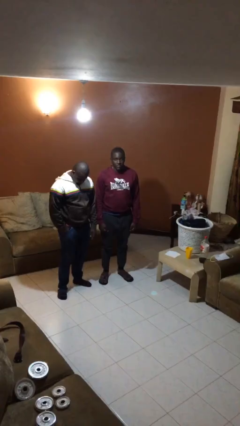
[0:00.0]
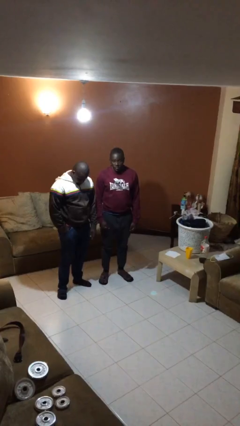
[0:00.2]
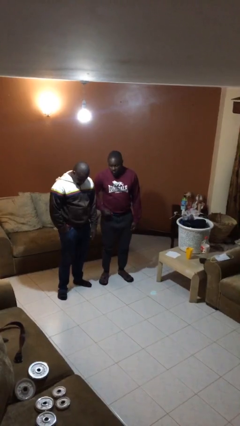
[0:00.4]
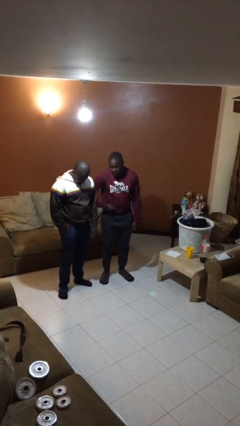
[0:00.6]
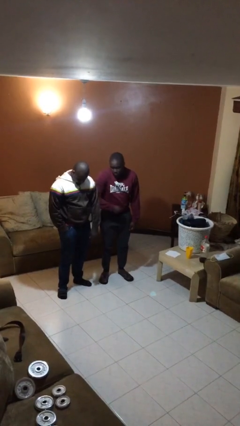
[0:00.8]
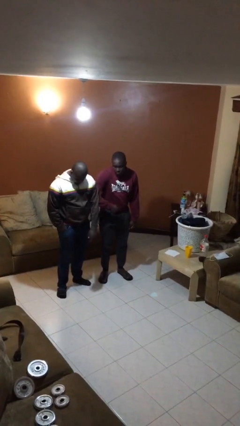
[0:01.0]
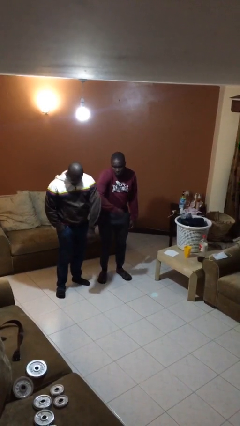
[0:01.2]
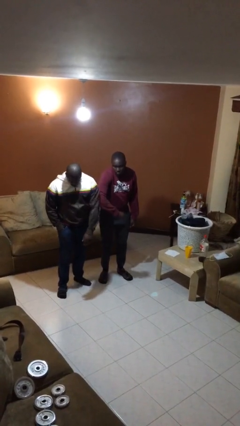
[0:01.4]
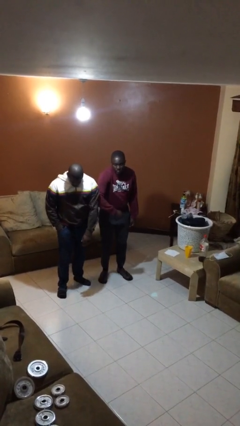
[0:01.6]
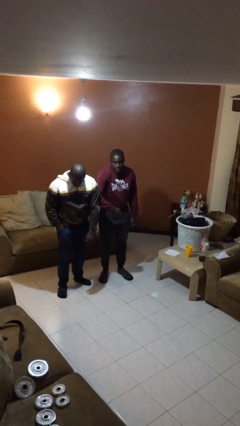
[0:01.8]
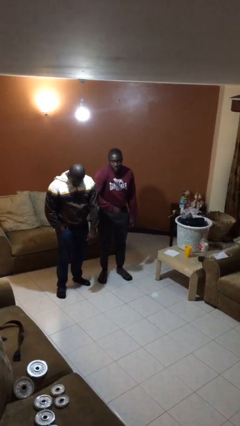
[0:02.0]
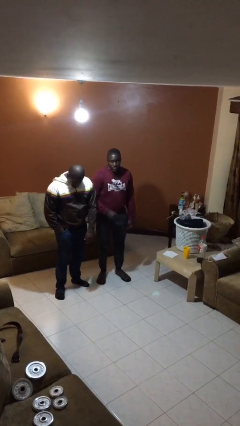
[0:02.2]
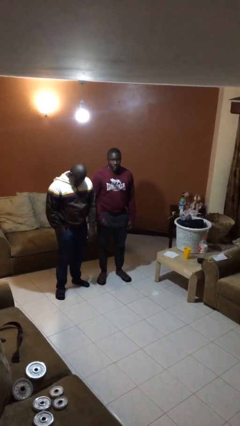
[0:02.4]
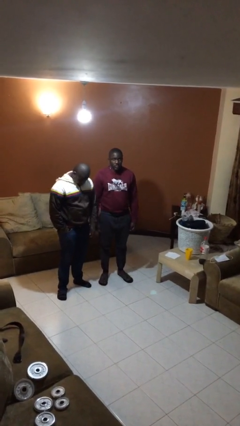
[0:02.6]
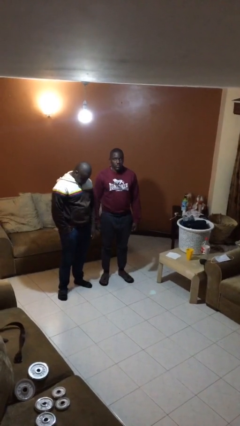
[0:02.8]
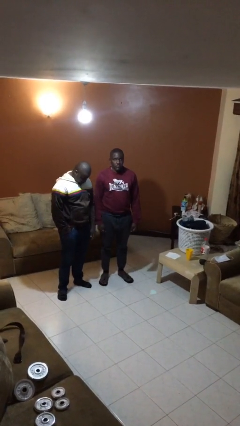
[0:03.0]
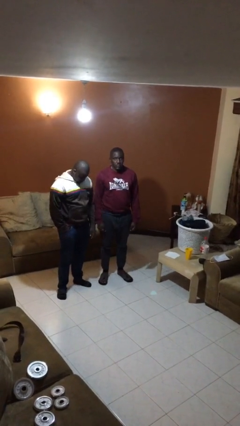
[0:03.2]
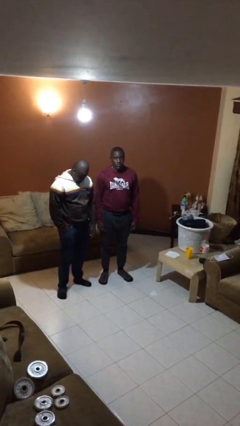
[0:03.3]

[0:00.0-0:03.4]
person nudges person with elbow

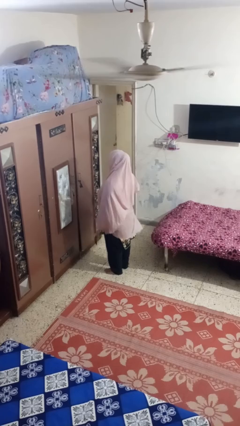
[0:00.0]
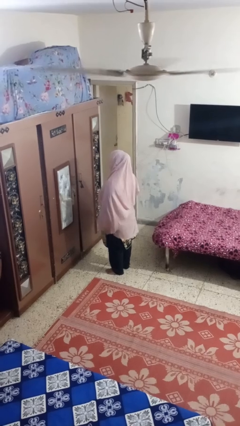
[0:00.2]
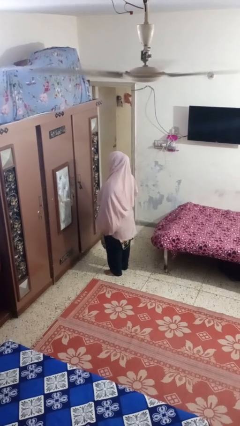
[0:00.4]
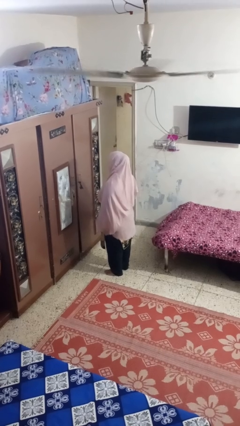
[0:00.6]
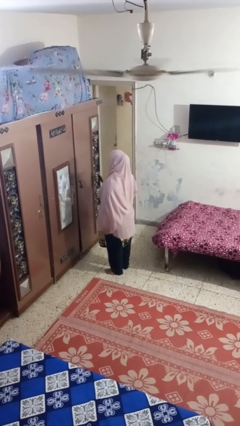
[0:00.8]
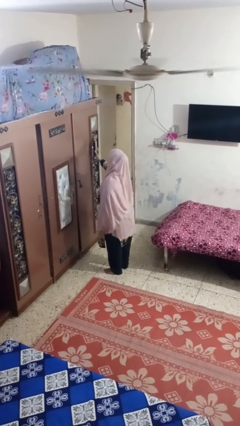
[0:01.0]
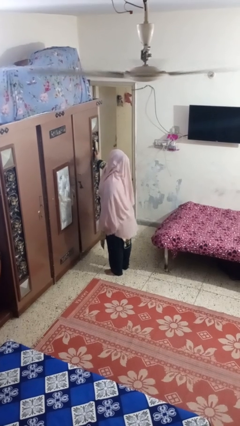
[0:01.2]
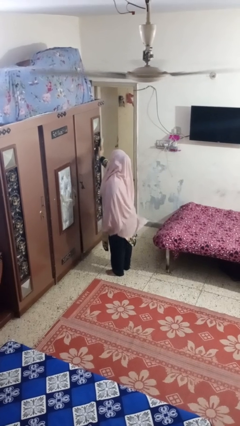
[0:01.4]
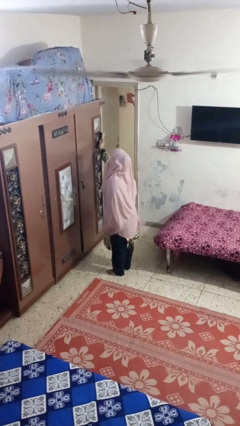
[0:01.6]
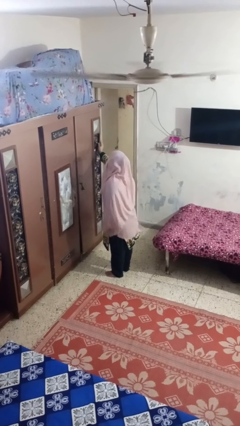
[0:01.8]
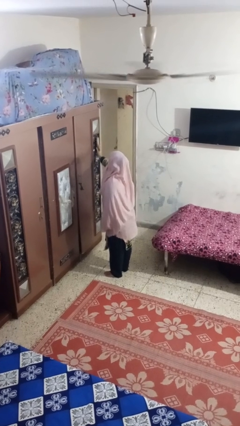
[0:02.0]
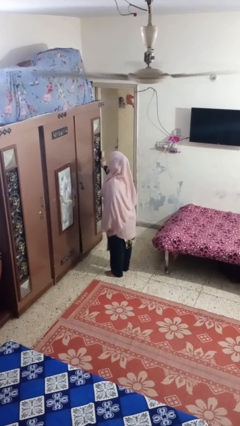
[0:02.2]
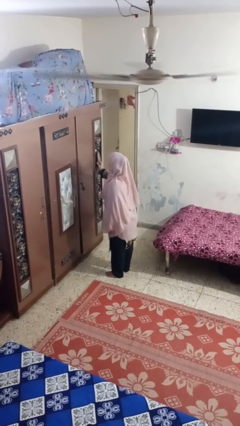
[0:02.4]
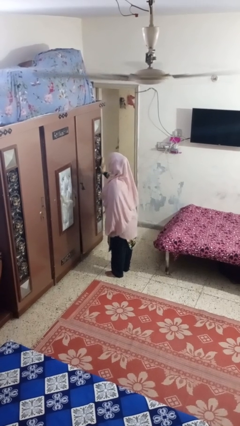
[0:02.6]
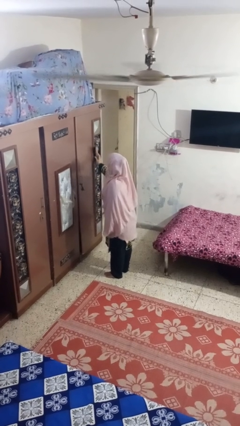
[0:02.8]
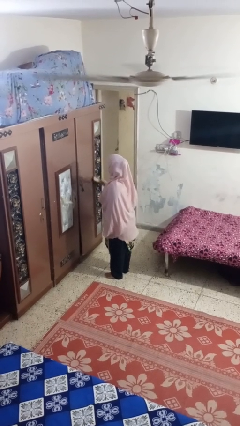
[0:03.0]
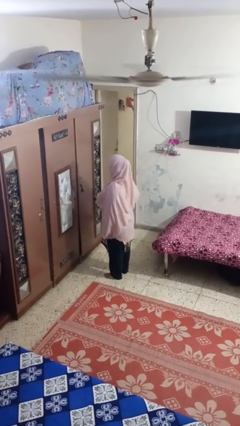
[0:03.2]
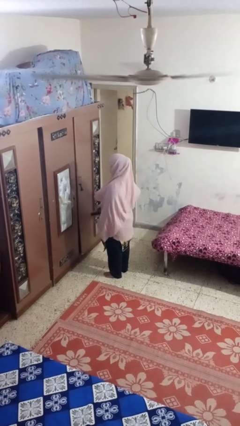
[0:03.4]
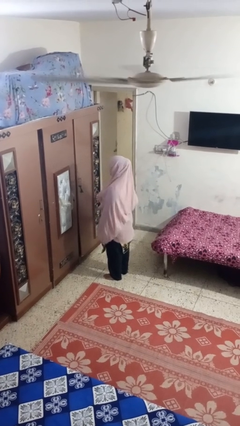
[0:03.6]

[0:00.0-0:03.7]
person dusts furniture

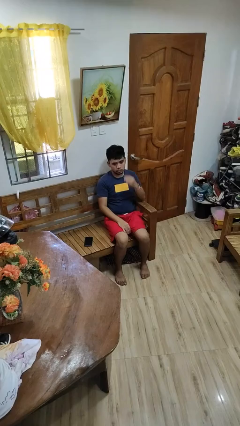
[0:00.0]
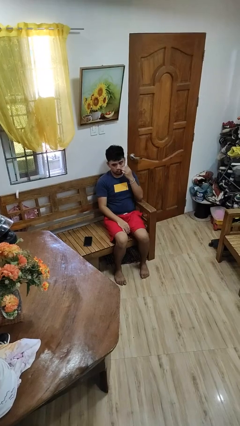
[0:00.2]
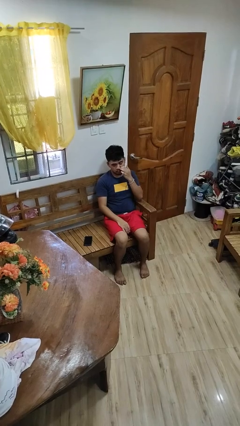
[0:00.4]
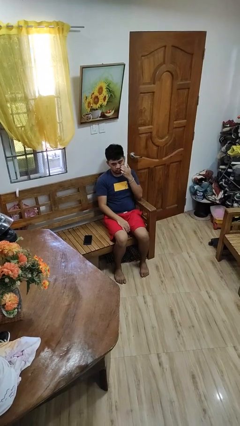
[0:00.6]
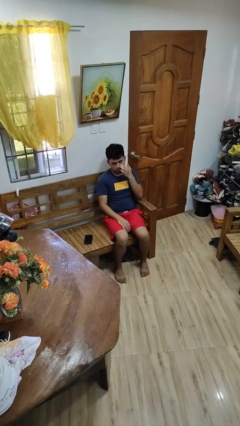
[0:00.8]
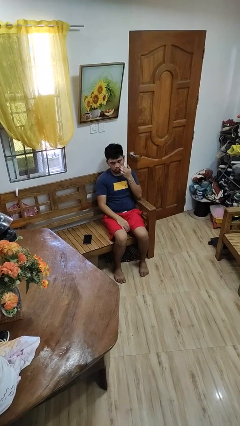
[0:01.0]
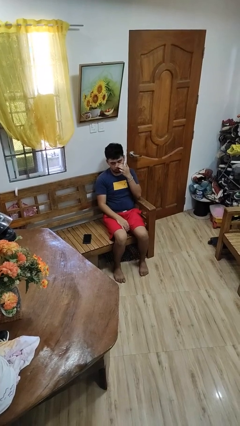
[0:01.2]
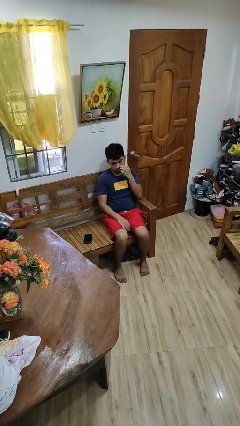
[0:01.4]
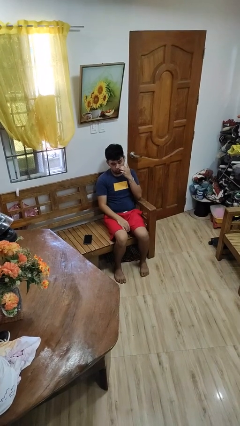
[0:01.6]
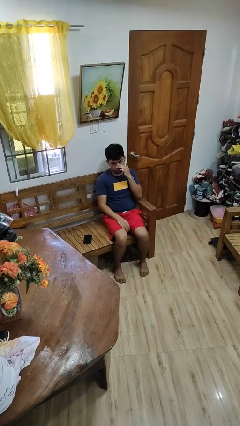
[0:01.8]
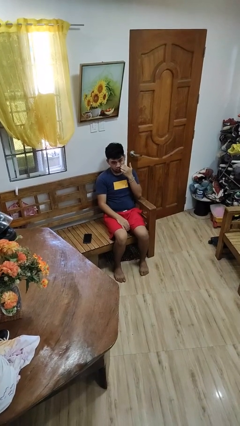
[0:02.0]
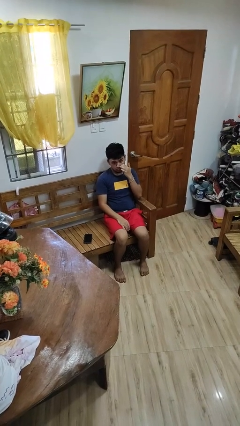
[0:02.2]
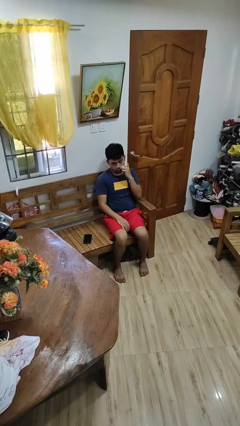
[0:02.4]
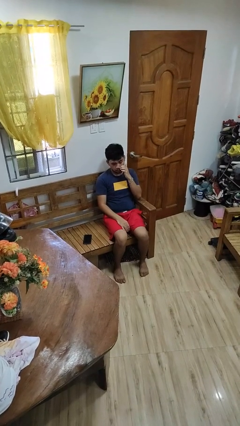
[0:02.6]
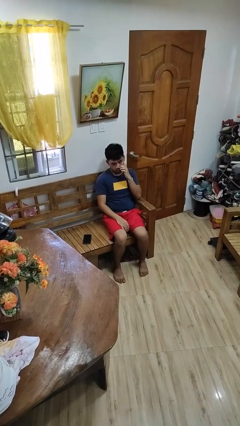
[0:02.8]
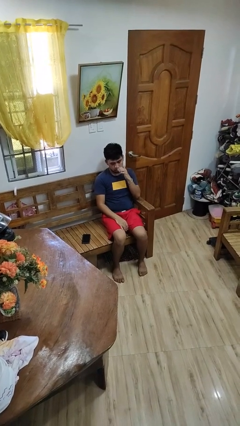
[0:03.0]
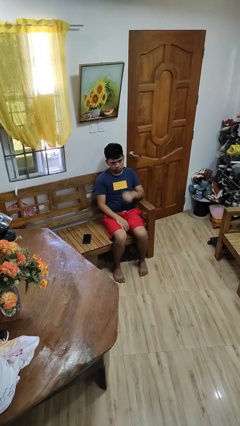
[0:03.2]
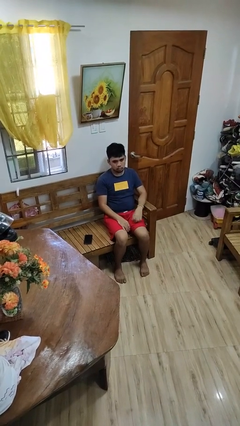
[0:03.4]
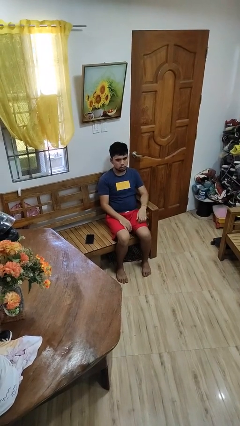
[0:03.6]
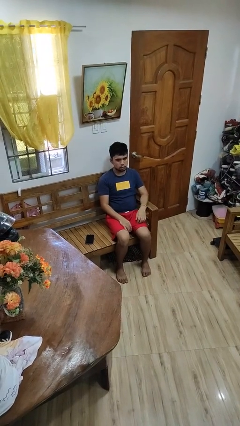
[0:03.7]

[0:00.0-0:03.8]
person scratches face

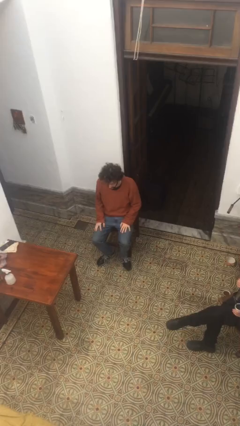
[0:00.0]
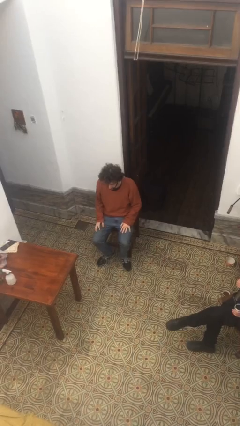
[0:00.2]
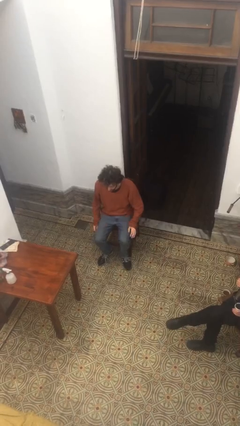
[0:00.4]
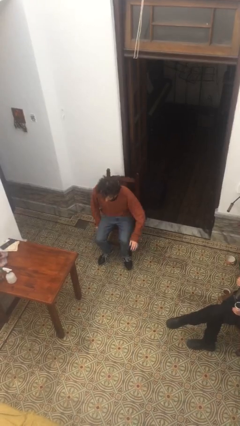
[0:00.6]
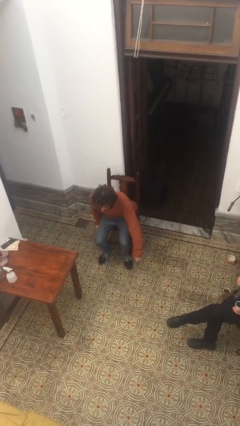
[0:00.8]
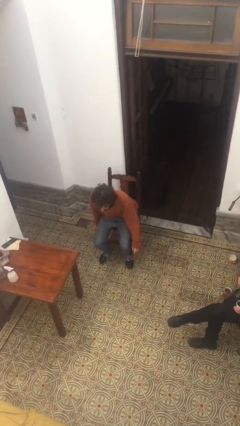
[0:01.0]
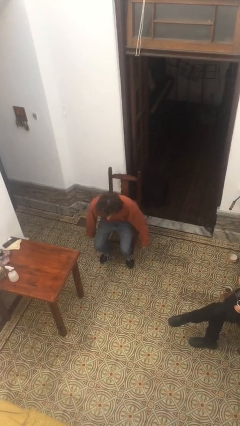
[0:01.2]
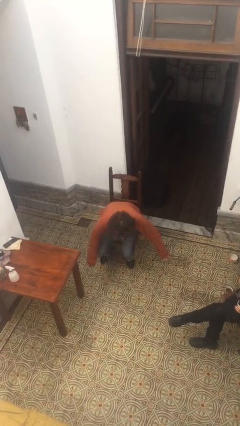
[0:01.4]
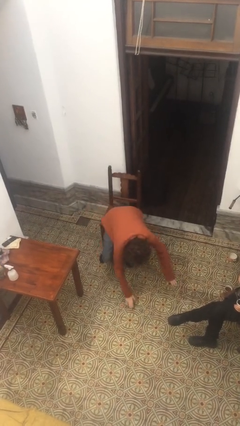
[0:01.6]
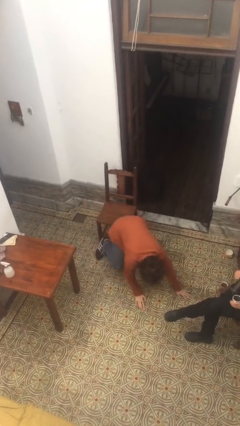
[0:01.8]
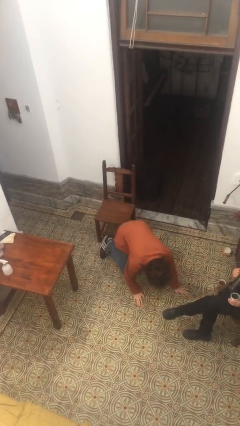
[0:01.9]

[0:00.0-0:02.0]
person falls from chair

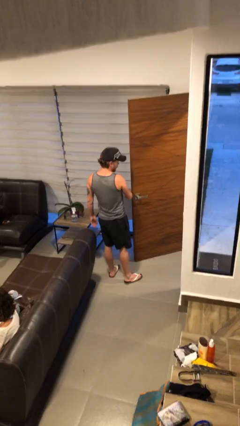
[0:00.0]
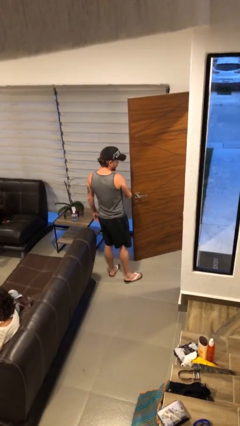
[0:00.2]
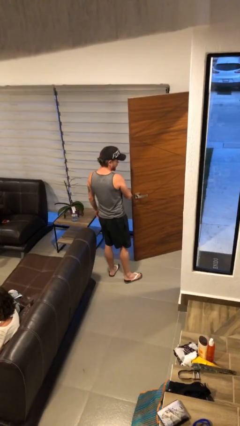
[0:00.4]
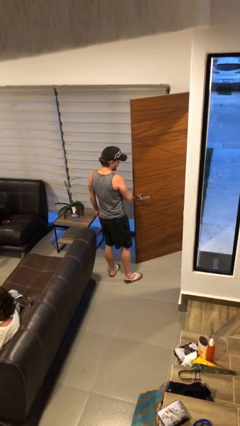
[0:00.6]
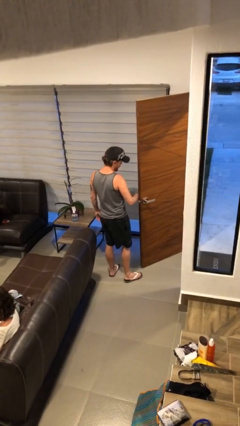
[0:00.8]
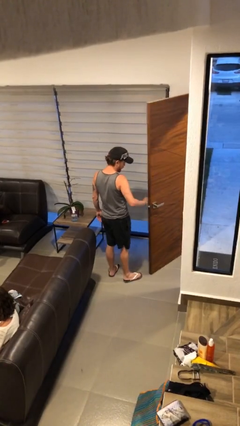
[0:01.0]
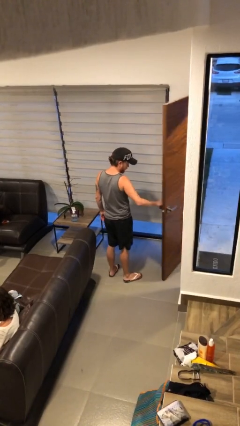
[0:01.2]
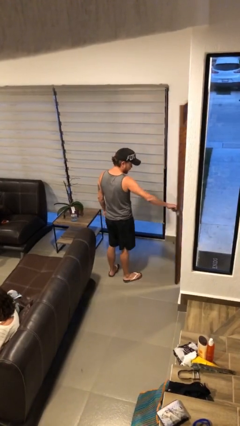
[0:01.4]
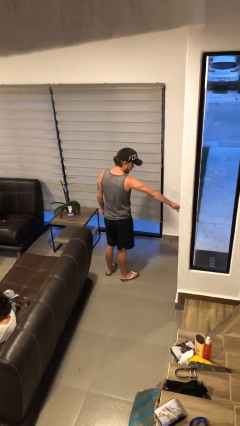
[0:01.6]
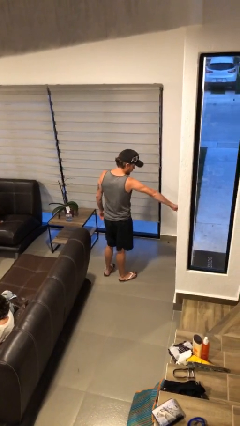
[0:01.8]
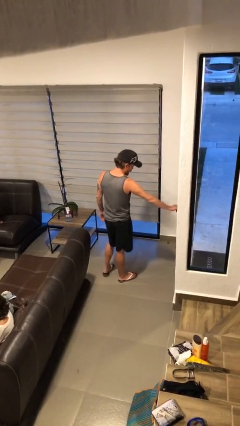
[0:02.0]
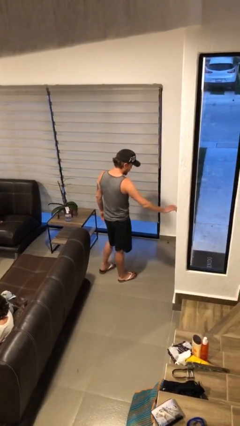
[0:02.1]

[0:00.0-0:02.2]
person closes facility door

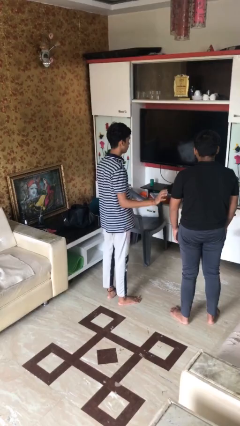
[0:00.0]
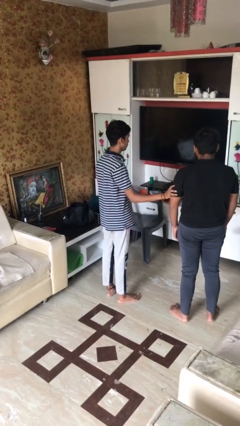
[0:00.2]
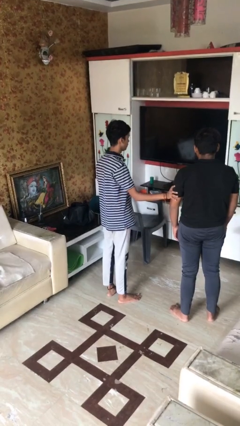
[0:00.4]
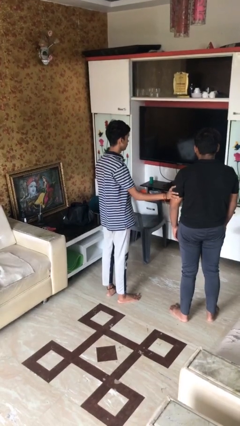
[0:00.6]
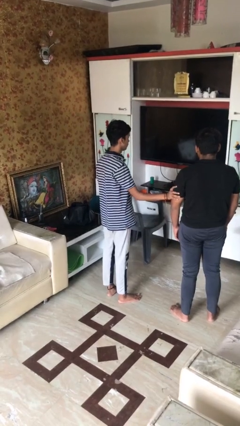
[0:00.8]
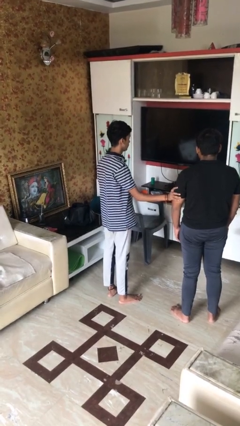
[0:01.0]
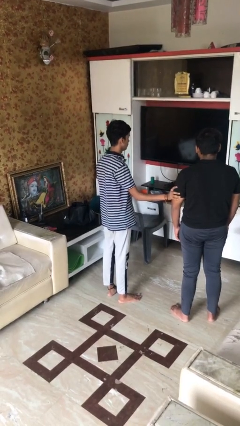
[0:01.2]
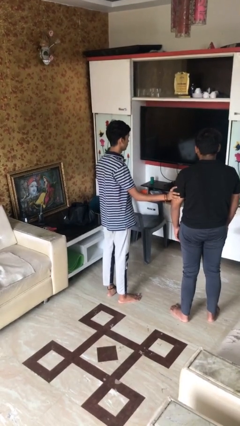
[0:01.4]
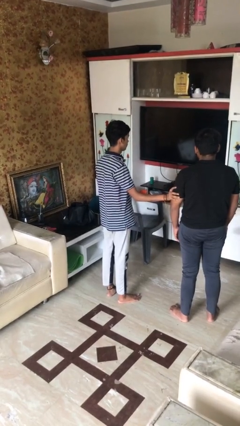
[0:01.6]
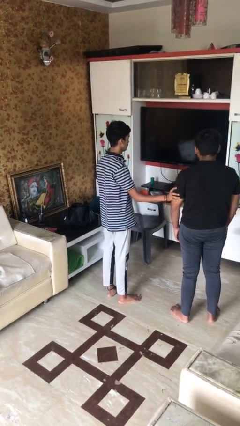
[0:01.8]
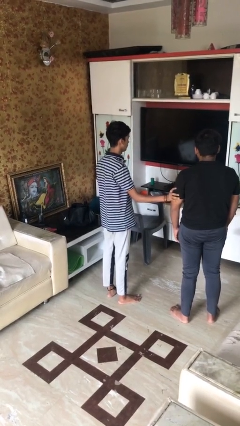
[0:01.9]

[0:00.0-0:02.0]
person grabs person by bicep

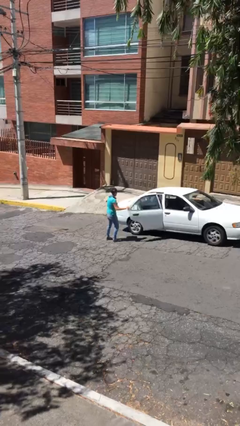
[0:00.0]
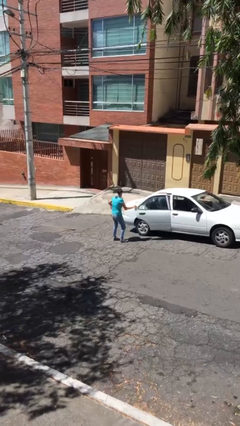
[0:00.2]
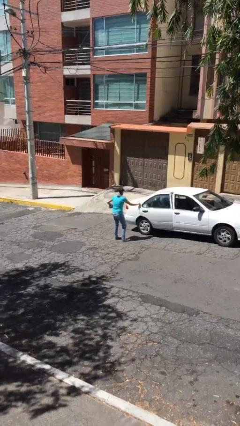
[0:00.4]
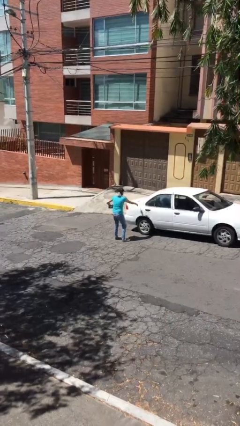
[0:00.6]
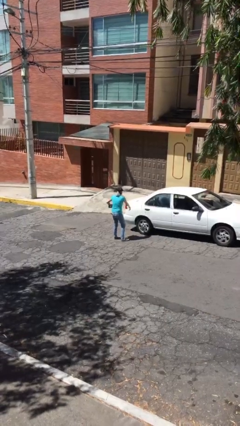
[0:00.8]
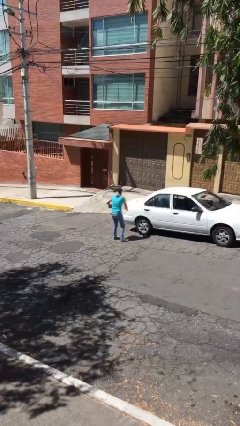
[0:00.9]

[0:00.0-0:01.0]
person closes car door
